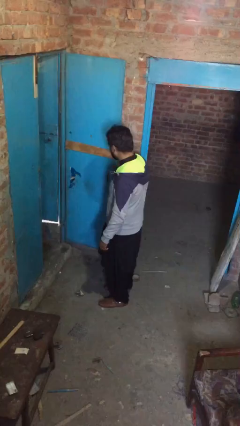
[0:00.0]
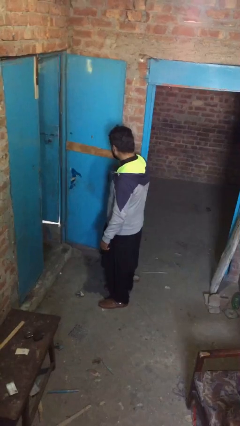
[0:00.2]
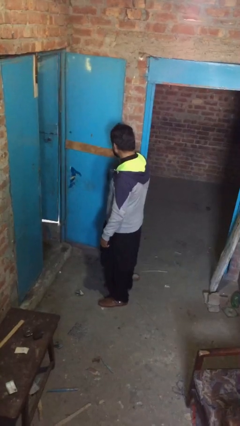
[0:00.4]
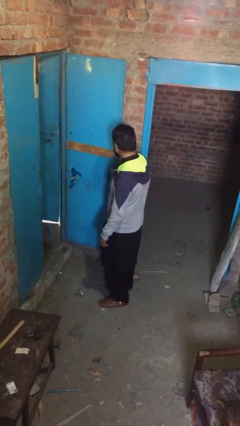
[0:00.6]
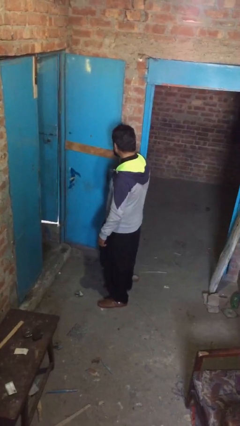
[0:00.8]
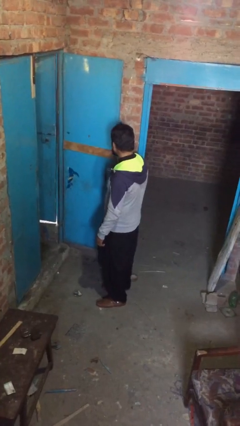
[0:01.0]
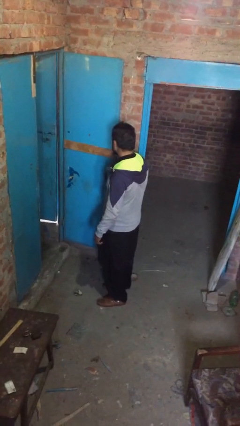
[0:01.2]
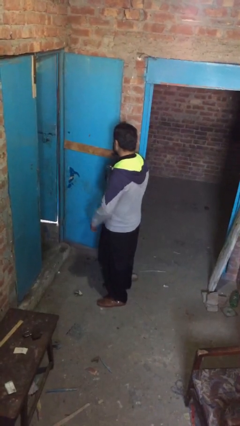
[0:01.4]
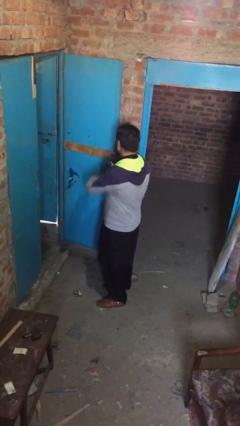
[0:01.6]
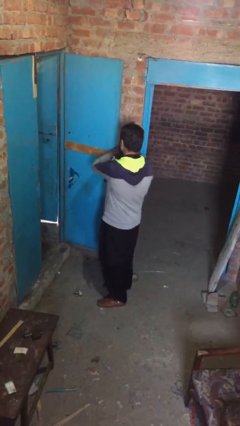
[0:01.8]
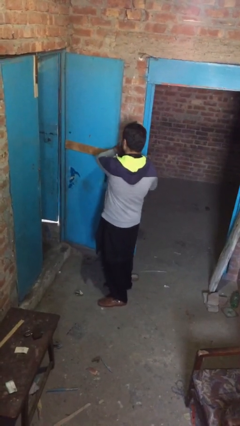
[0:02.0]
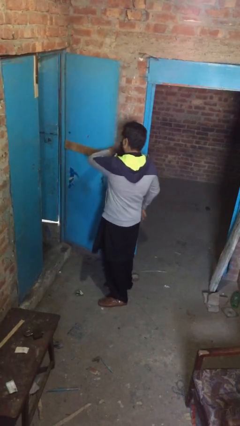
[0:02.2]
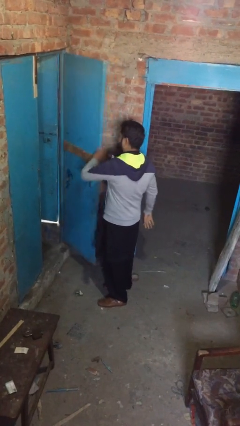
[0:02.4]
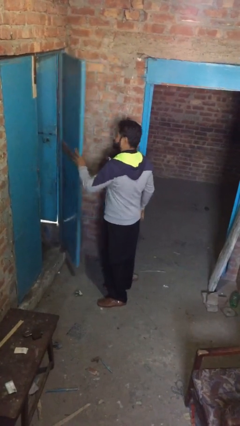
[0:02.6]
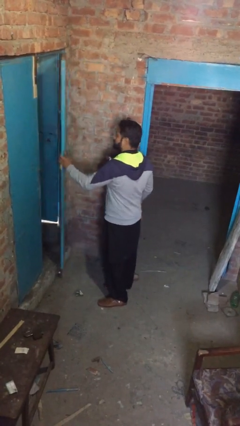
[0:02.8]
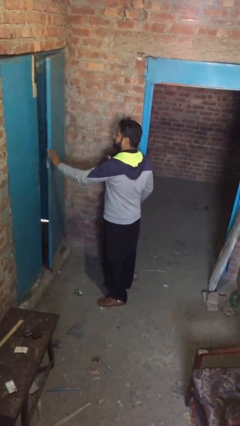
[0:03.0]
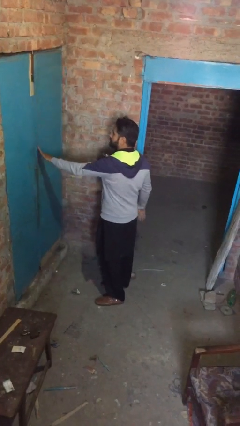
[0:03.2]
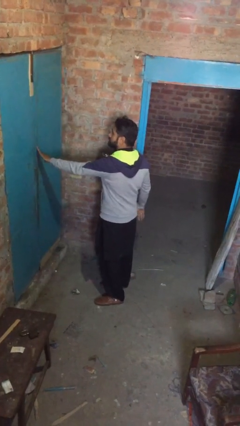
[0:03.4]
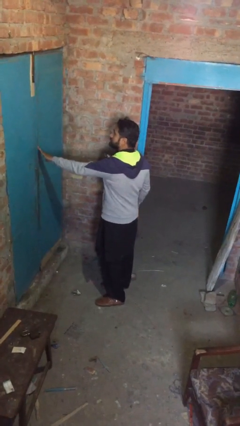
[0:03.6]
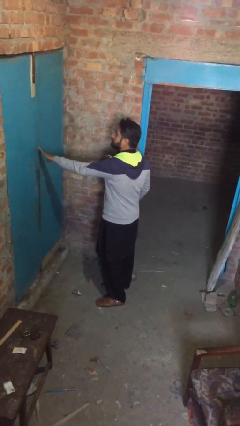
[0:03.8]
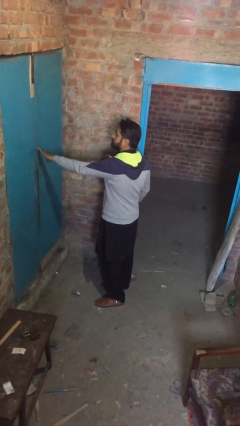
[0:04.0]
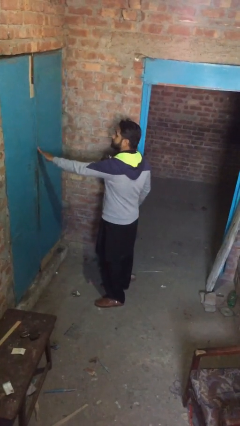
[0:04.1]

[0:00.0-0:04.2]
person closes facility door

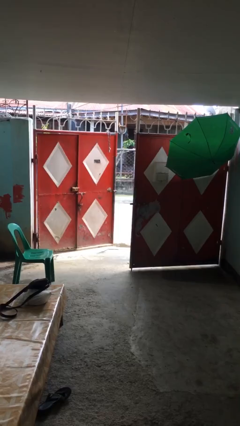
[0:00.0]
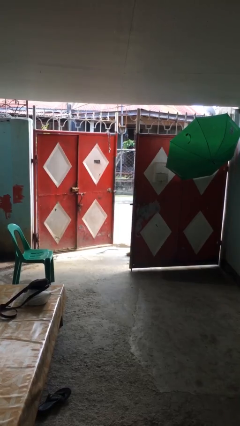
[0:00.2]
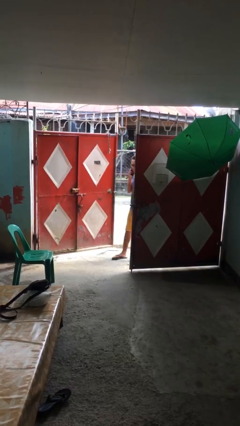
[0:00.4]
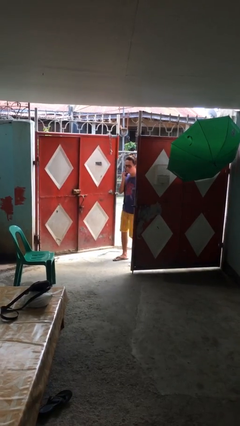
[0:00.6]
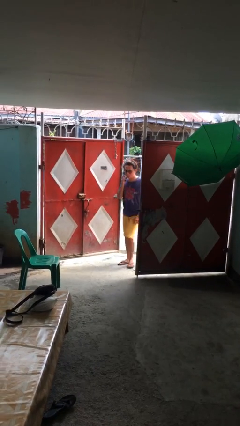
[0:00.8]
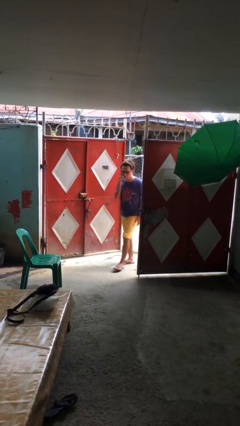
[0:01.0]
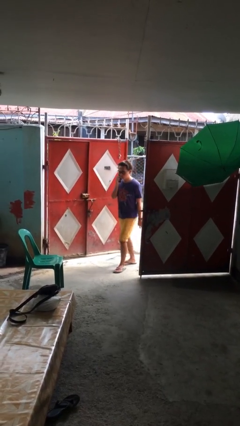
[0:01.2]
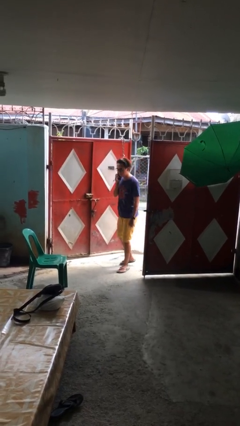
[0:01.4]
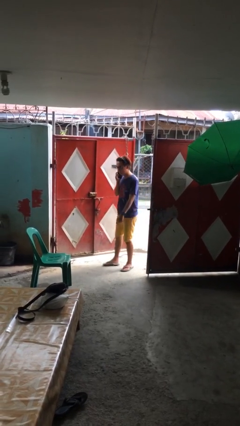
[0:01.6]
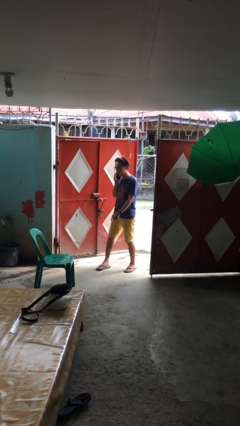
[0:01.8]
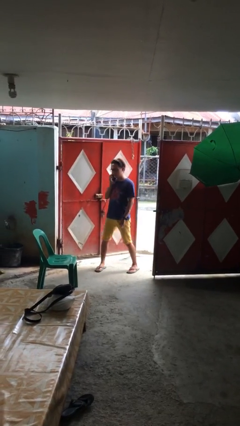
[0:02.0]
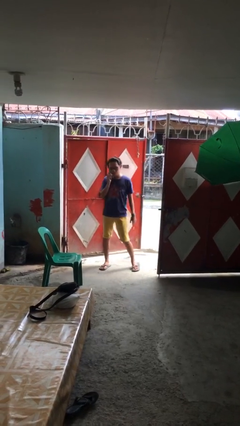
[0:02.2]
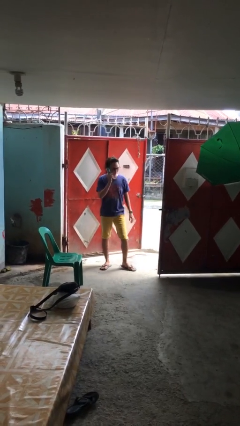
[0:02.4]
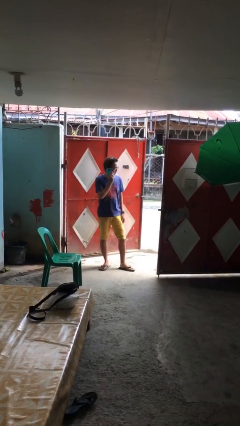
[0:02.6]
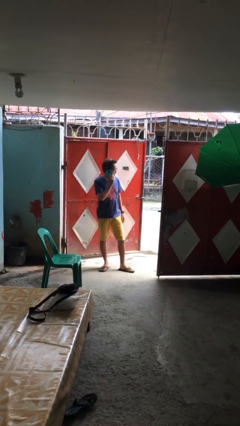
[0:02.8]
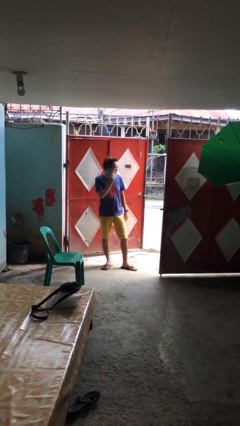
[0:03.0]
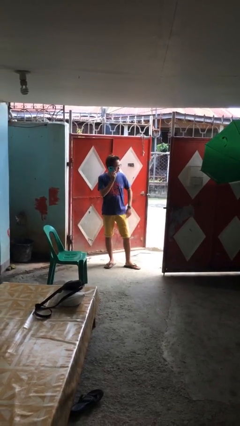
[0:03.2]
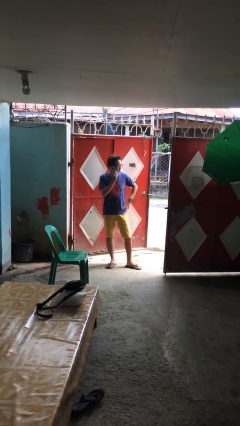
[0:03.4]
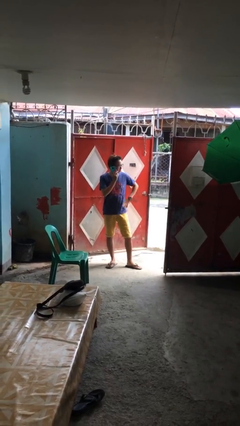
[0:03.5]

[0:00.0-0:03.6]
person enters scene through structure

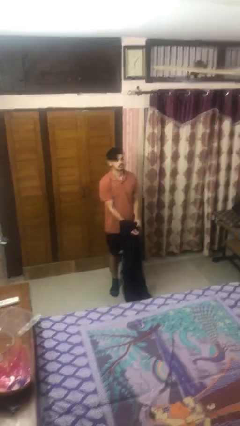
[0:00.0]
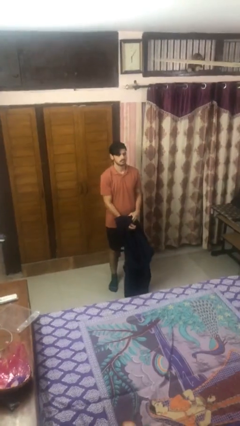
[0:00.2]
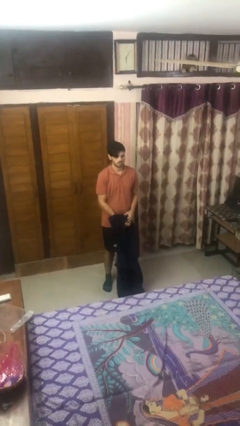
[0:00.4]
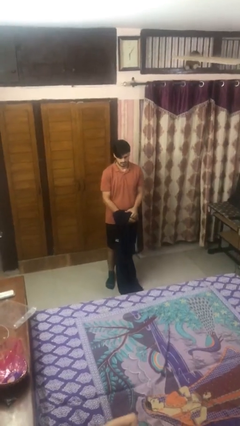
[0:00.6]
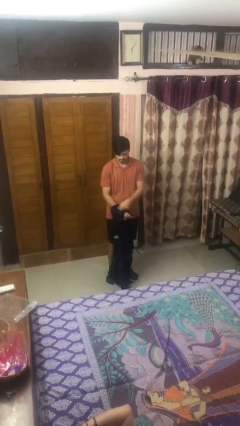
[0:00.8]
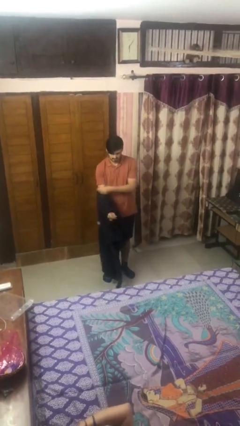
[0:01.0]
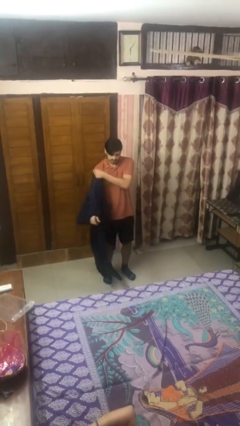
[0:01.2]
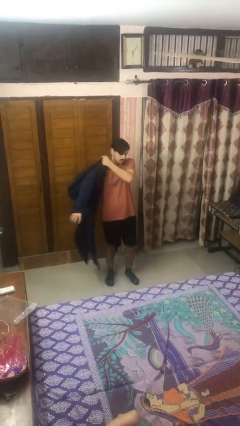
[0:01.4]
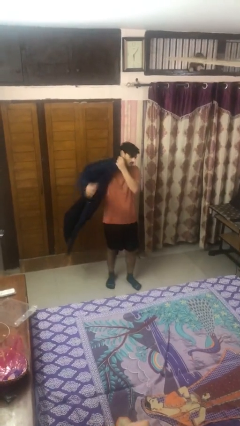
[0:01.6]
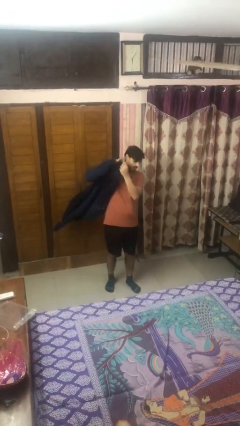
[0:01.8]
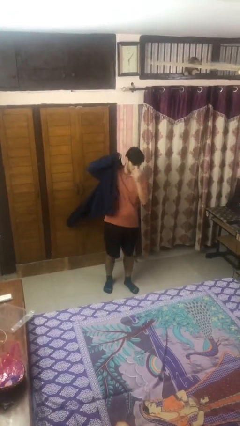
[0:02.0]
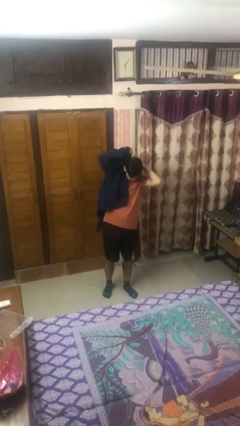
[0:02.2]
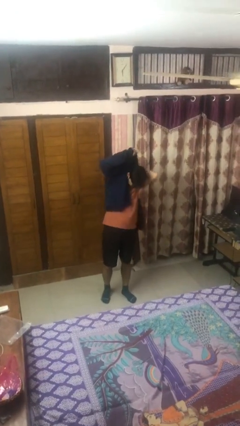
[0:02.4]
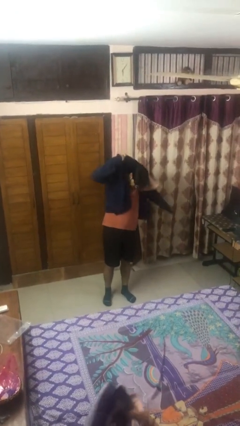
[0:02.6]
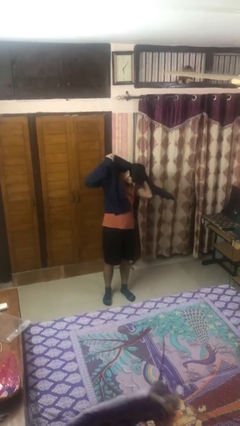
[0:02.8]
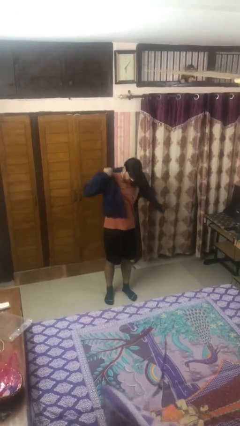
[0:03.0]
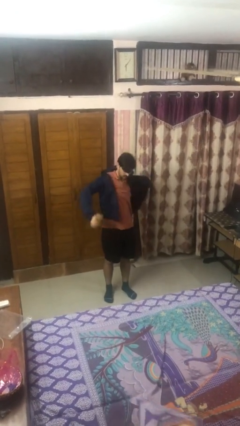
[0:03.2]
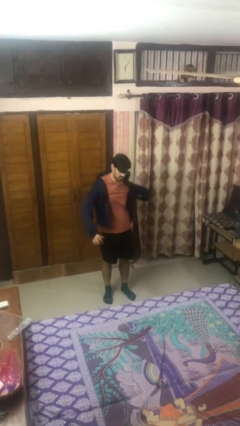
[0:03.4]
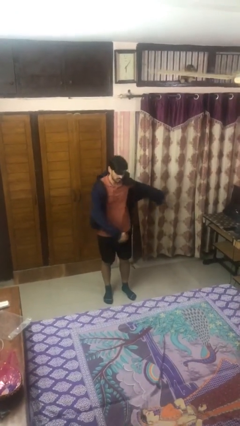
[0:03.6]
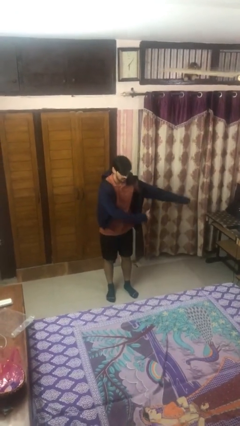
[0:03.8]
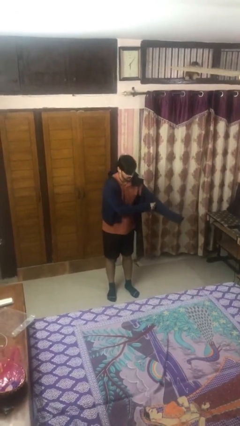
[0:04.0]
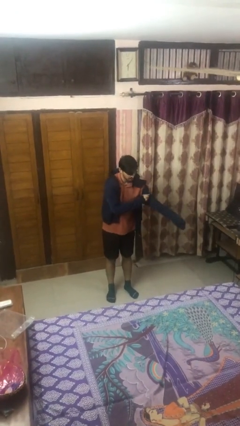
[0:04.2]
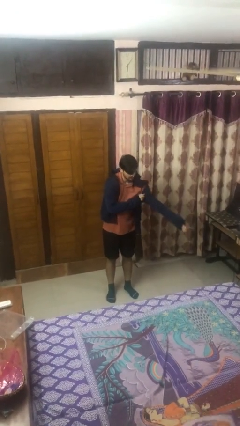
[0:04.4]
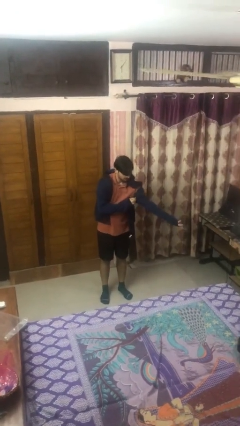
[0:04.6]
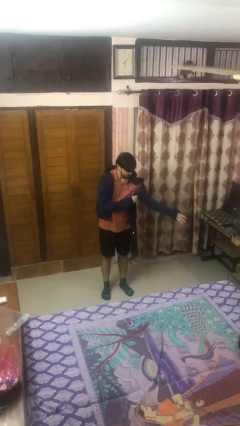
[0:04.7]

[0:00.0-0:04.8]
person puts on jacket

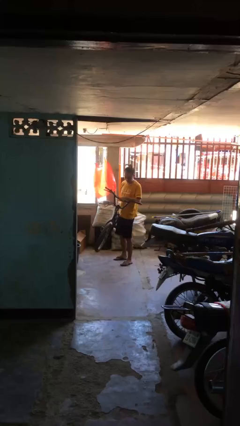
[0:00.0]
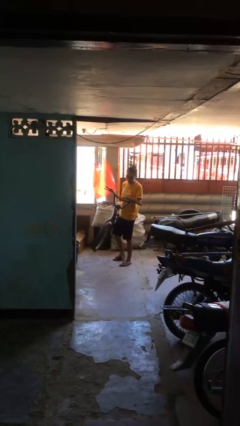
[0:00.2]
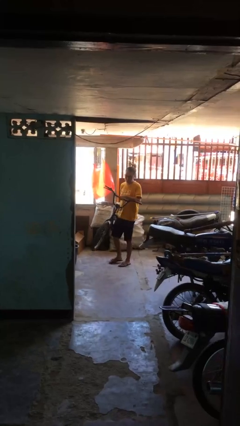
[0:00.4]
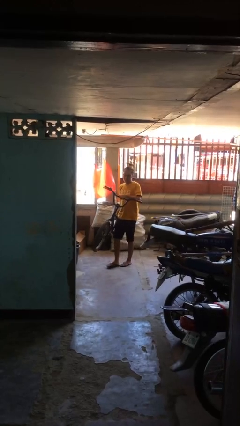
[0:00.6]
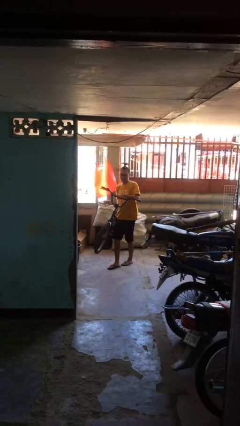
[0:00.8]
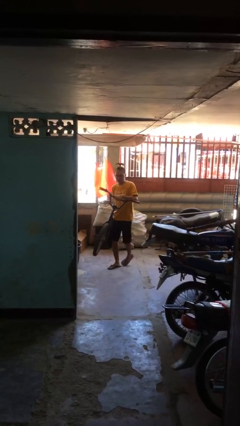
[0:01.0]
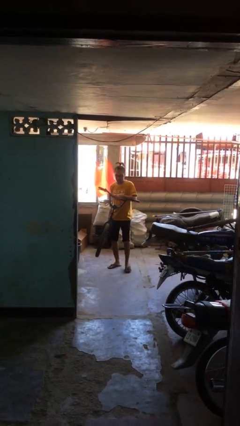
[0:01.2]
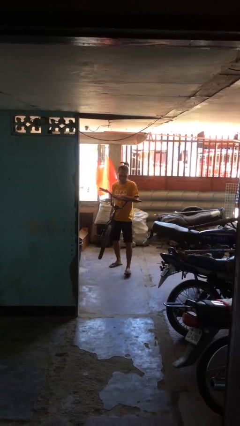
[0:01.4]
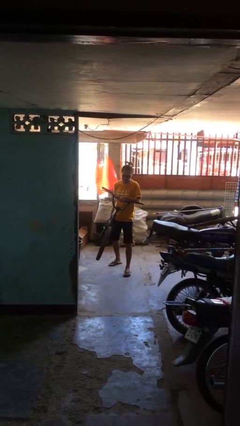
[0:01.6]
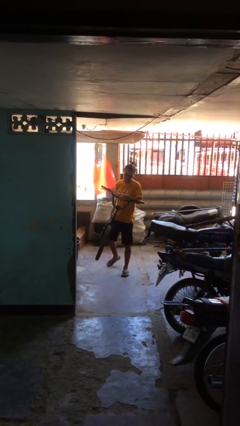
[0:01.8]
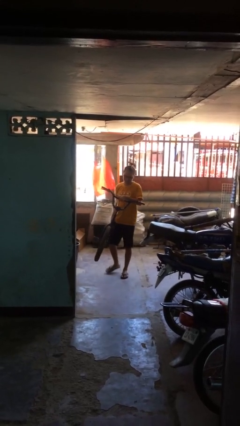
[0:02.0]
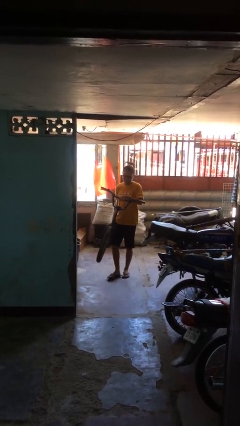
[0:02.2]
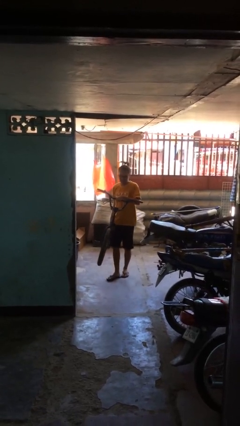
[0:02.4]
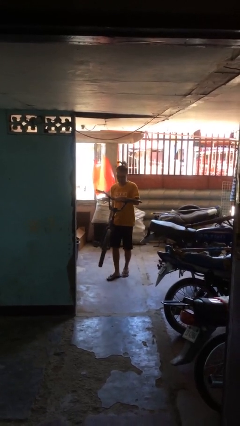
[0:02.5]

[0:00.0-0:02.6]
person carries heavy object

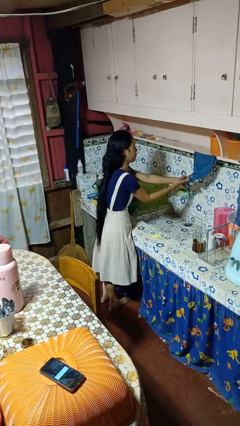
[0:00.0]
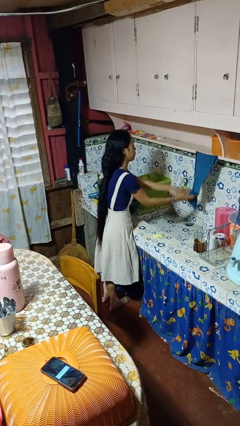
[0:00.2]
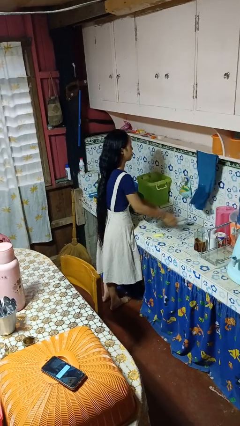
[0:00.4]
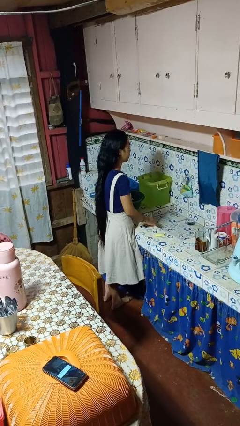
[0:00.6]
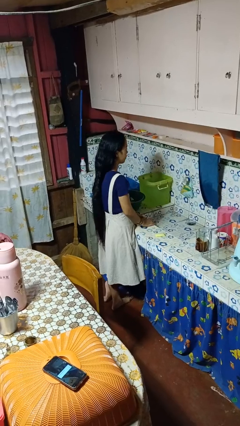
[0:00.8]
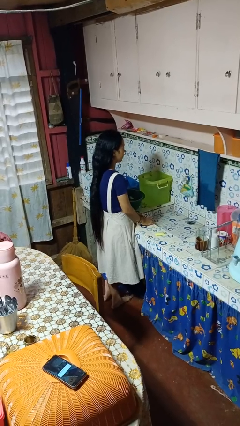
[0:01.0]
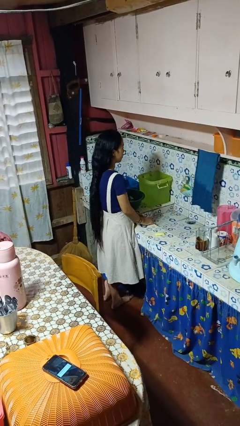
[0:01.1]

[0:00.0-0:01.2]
person dries hands with towel

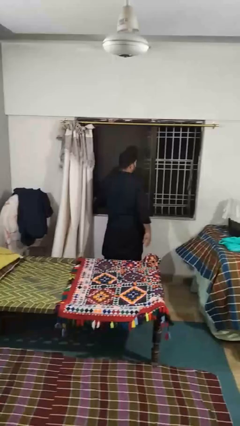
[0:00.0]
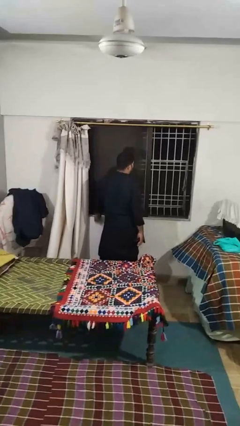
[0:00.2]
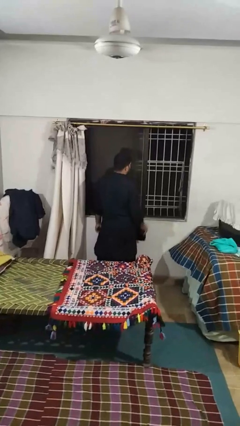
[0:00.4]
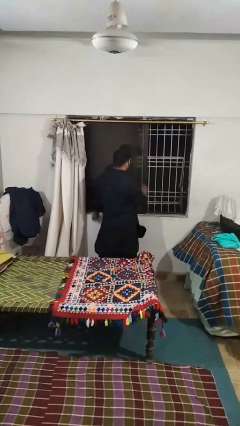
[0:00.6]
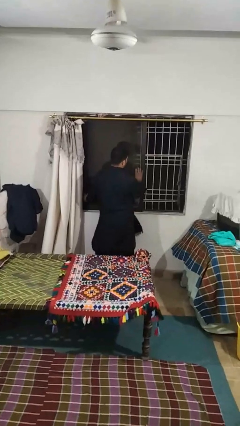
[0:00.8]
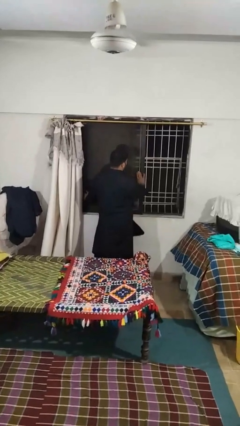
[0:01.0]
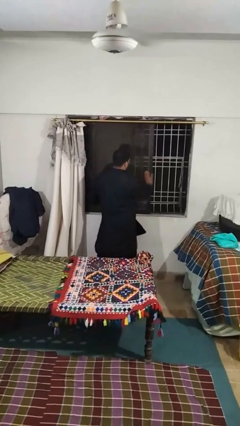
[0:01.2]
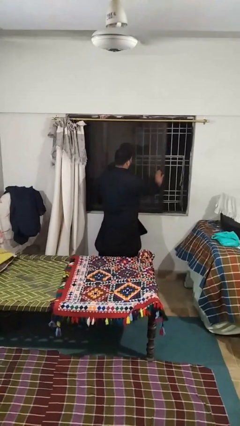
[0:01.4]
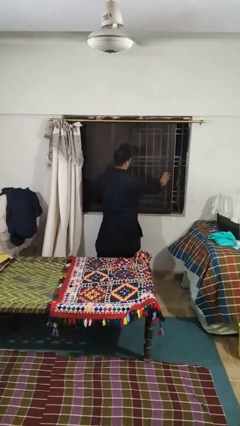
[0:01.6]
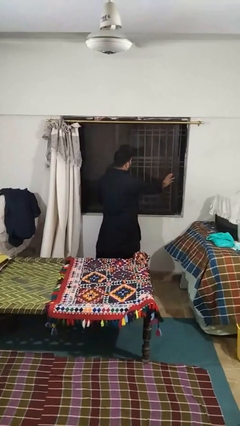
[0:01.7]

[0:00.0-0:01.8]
person closes sliding door
